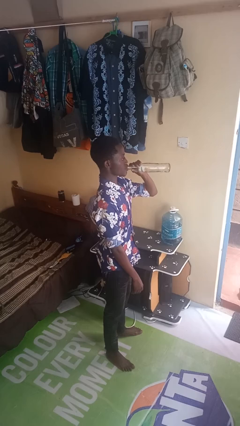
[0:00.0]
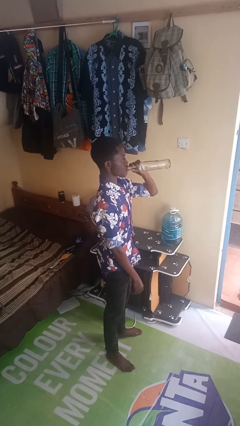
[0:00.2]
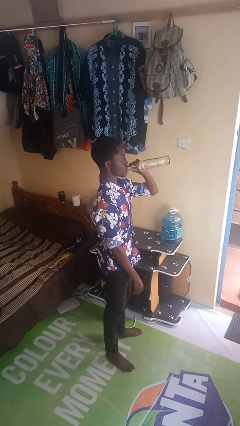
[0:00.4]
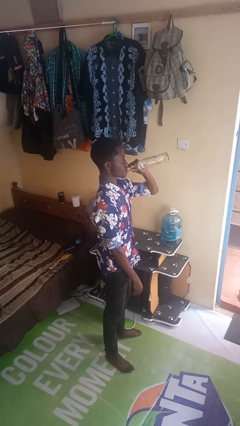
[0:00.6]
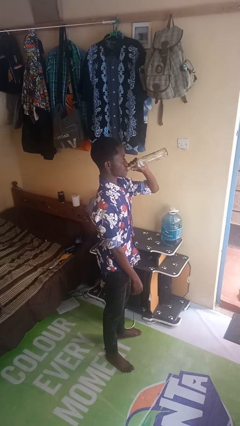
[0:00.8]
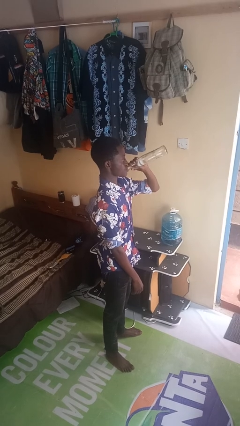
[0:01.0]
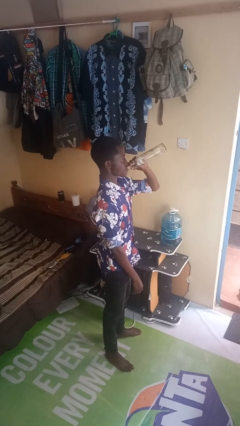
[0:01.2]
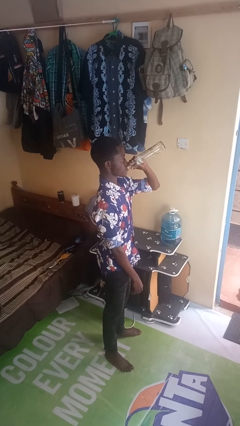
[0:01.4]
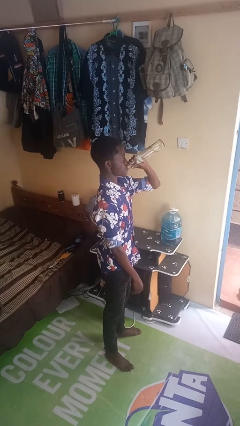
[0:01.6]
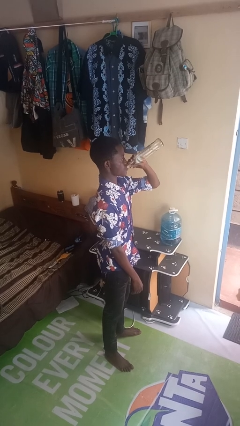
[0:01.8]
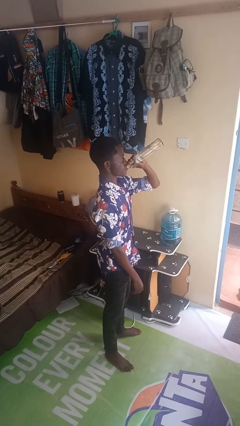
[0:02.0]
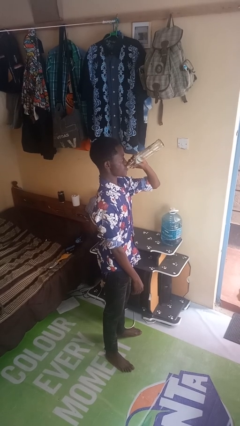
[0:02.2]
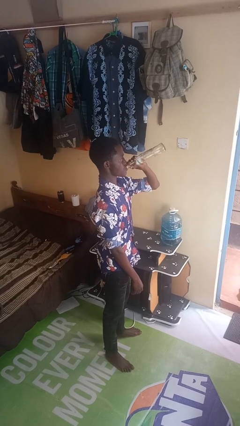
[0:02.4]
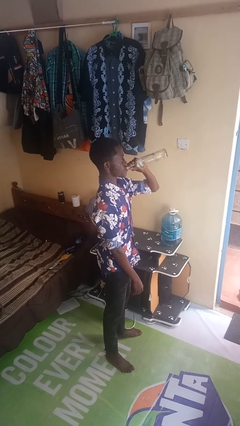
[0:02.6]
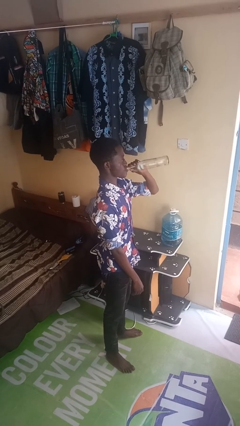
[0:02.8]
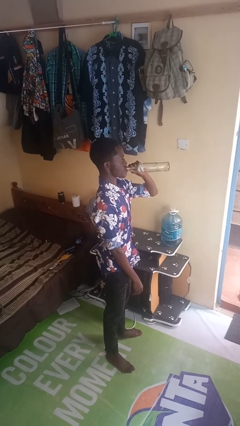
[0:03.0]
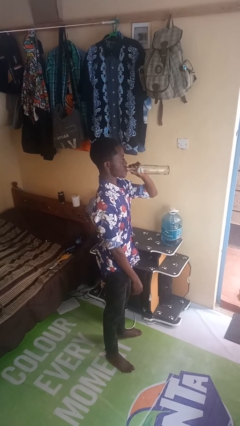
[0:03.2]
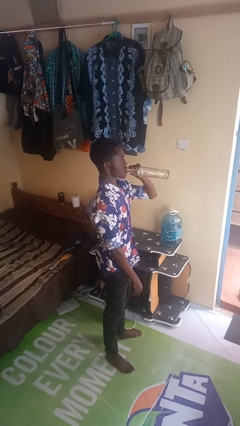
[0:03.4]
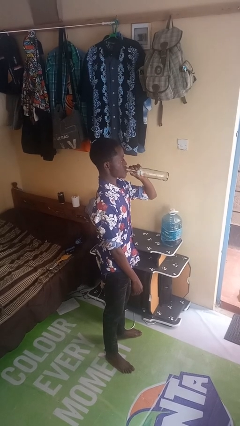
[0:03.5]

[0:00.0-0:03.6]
person drinks from bottle

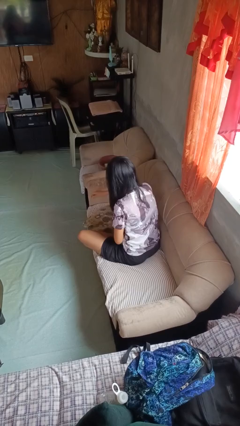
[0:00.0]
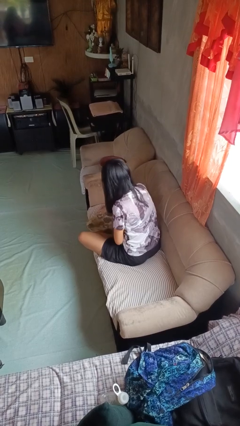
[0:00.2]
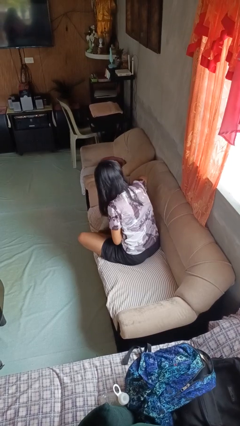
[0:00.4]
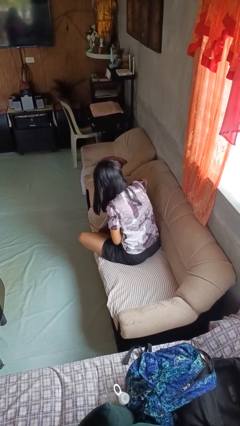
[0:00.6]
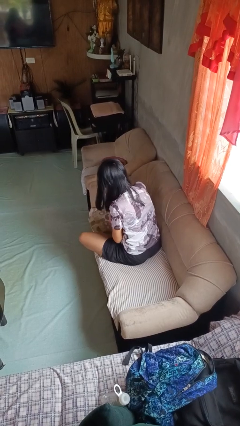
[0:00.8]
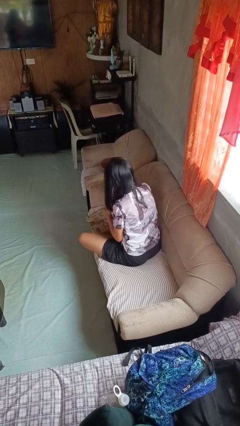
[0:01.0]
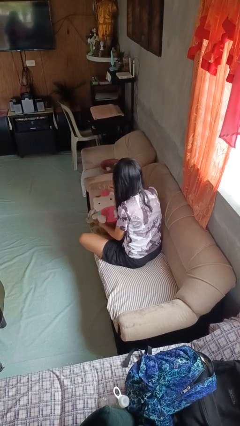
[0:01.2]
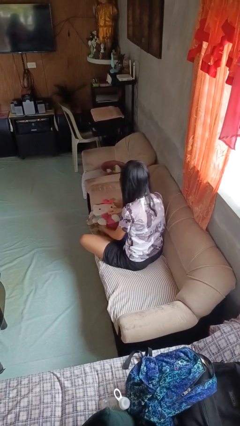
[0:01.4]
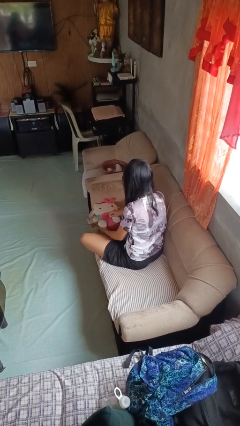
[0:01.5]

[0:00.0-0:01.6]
person searches in couch

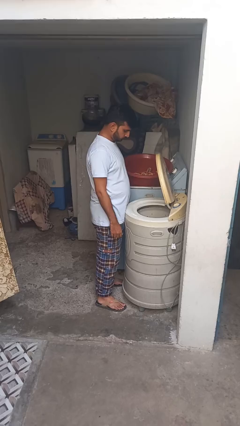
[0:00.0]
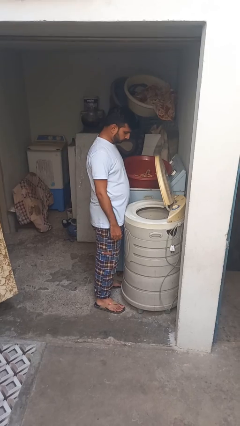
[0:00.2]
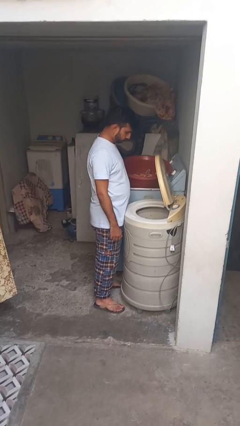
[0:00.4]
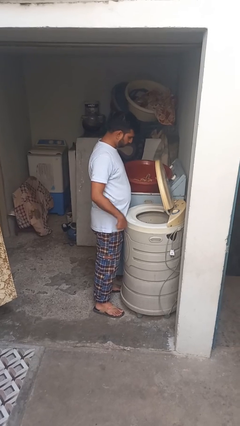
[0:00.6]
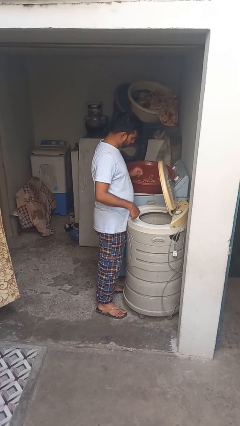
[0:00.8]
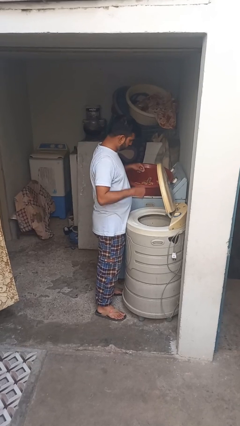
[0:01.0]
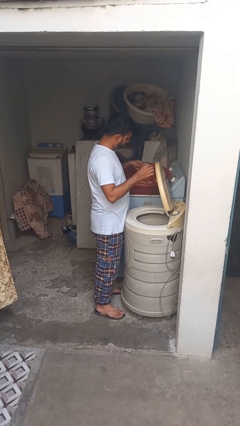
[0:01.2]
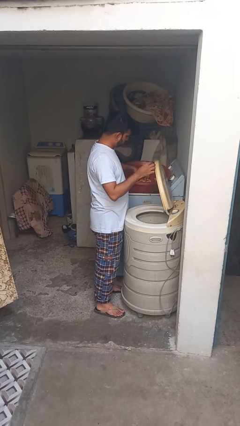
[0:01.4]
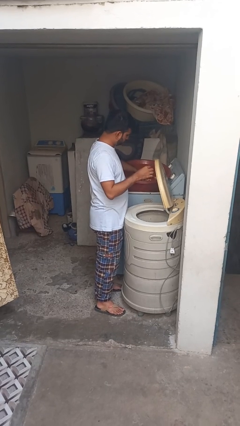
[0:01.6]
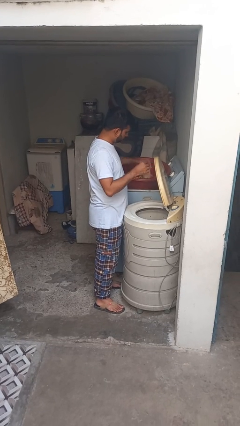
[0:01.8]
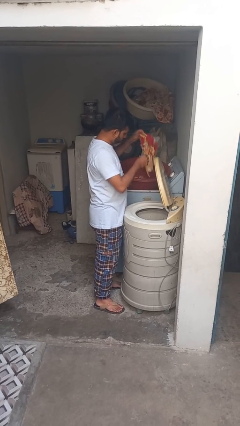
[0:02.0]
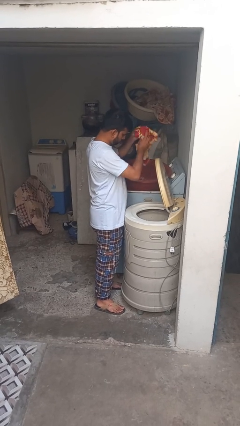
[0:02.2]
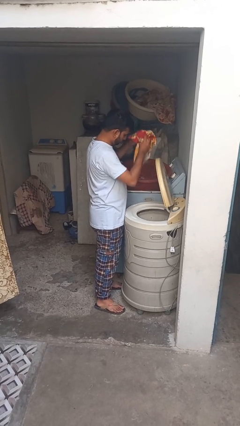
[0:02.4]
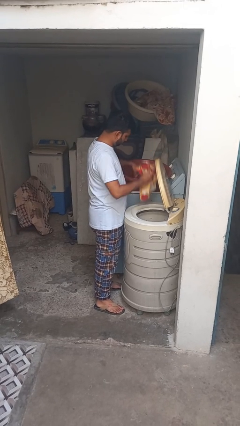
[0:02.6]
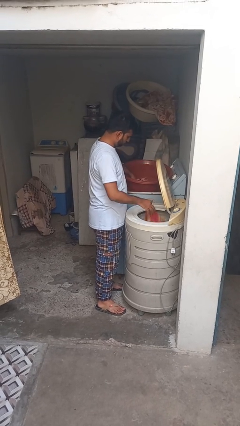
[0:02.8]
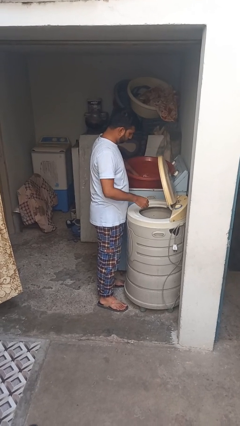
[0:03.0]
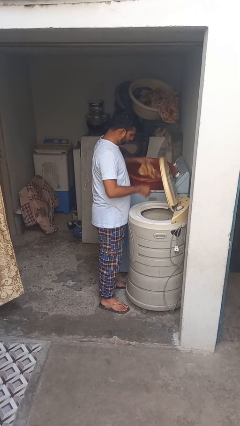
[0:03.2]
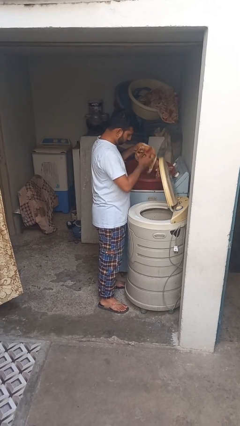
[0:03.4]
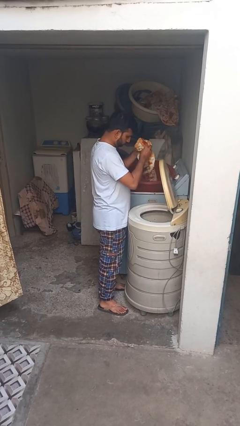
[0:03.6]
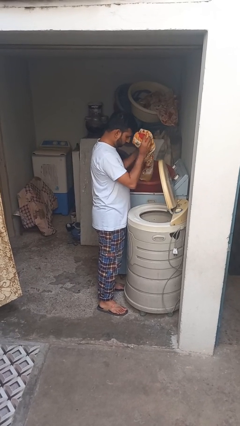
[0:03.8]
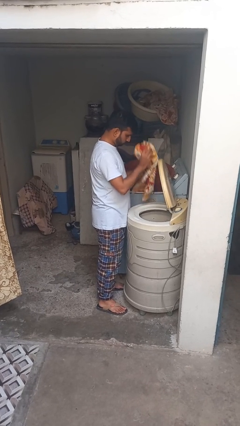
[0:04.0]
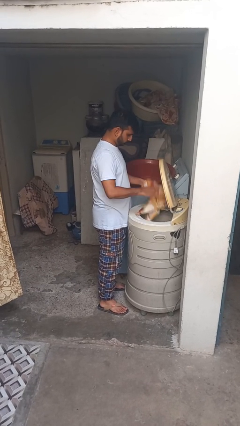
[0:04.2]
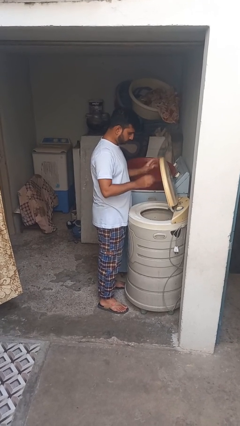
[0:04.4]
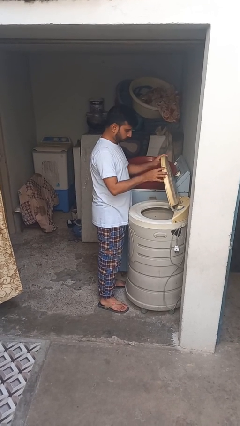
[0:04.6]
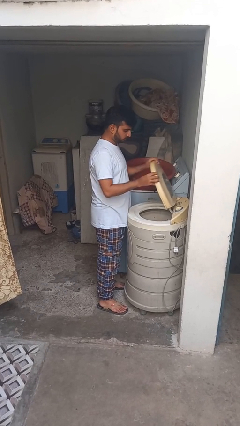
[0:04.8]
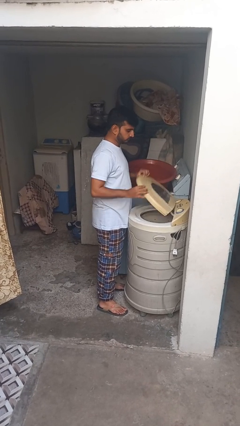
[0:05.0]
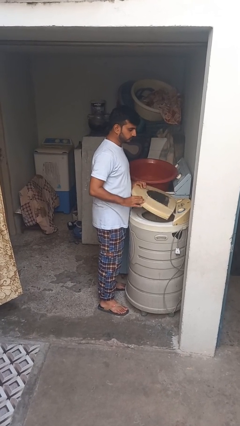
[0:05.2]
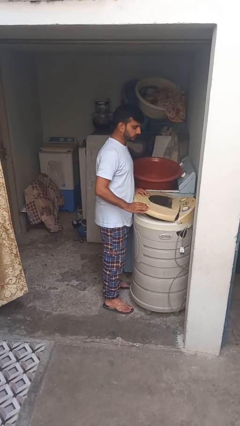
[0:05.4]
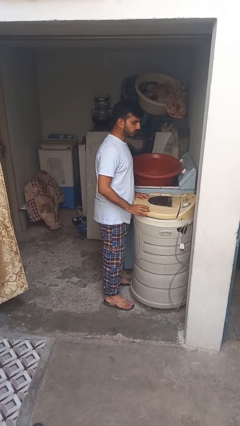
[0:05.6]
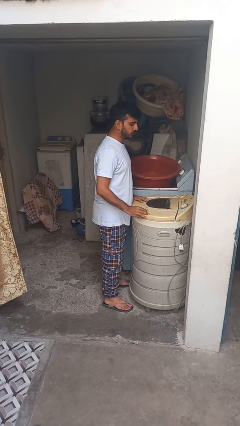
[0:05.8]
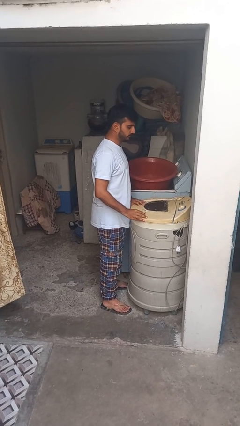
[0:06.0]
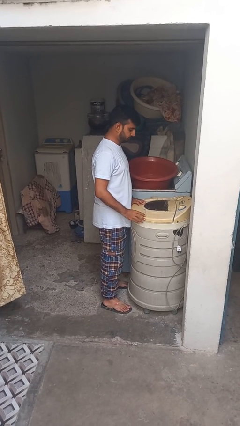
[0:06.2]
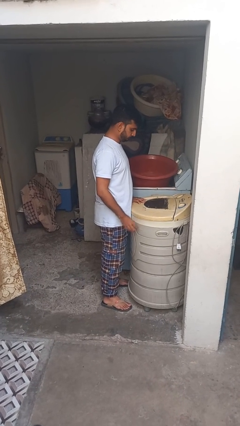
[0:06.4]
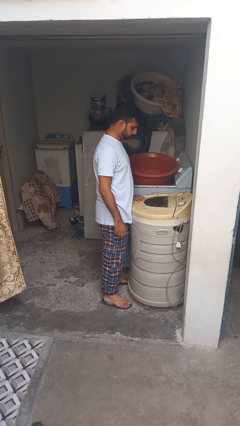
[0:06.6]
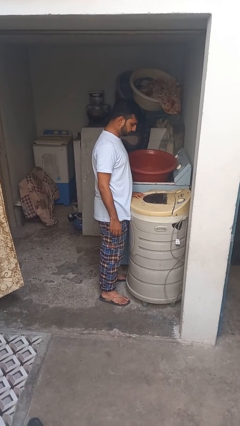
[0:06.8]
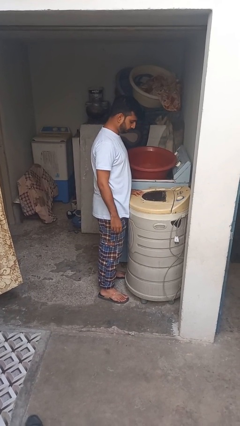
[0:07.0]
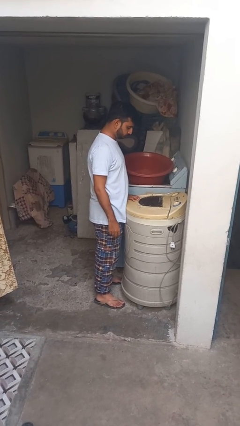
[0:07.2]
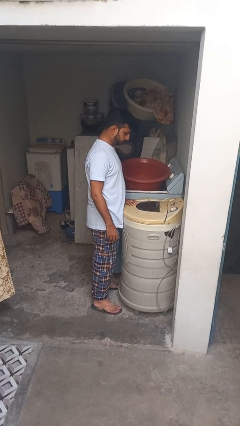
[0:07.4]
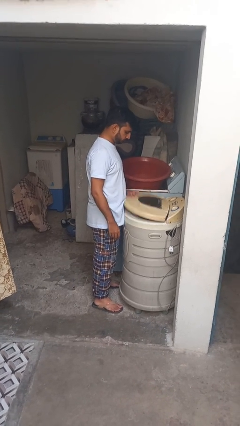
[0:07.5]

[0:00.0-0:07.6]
person loads clotheswasher

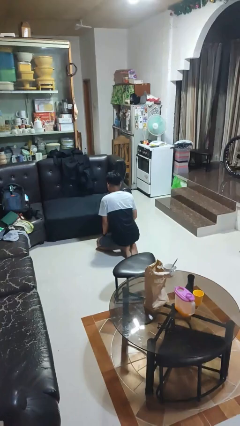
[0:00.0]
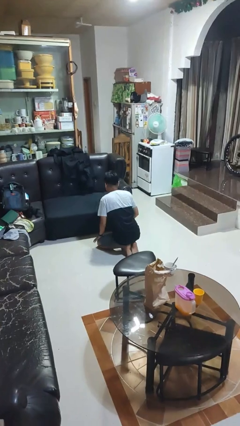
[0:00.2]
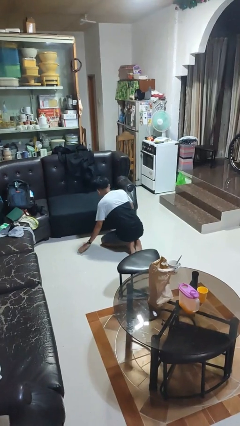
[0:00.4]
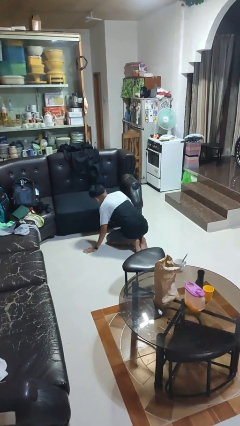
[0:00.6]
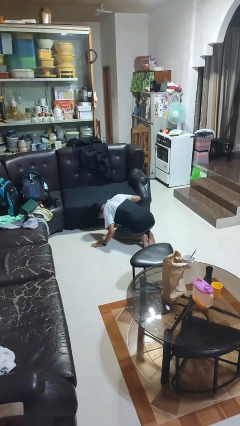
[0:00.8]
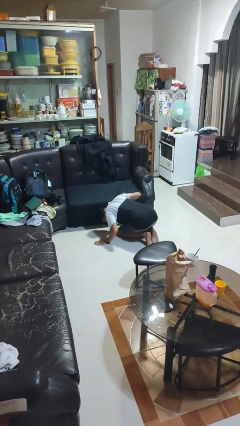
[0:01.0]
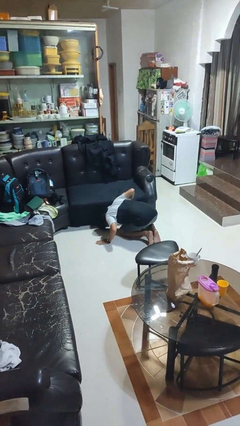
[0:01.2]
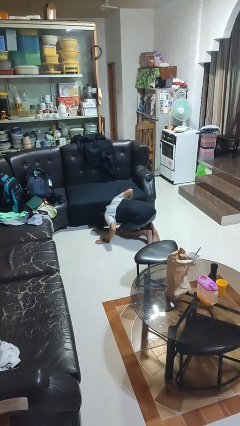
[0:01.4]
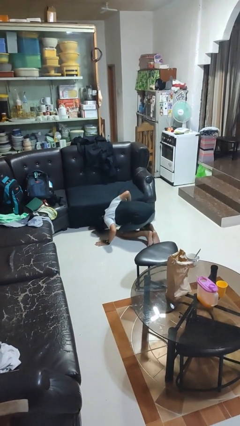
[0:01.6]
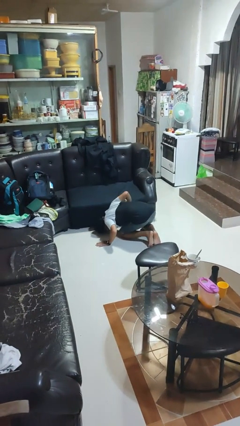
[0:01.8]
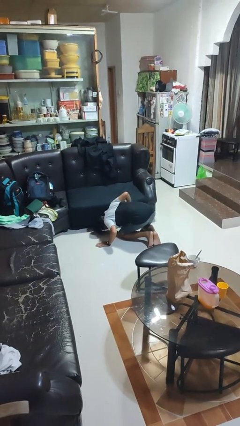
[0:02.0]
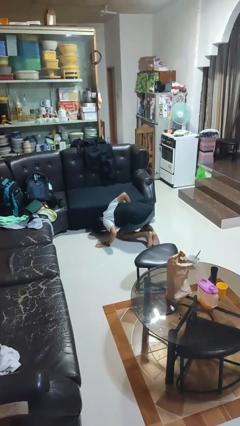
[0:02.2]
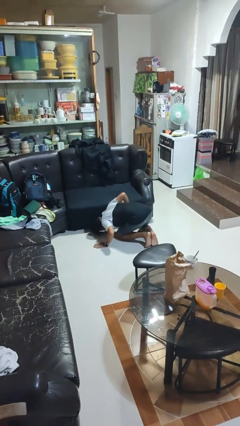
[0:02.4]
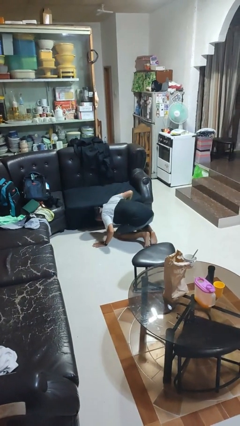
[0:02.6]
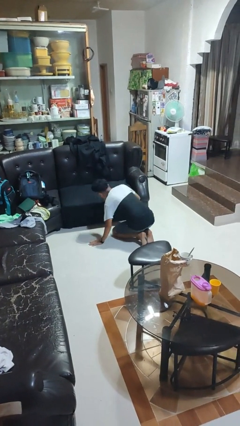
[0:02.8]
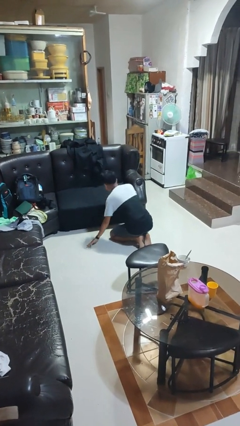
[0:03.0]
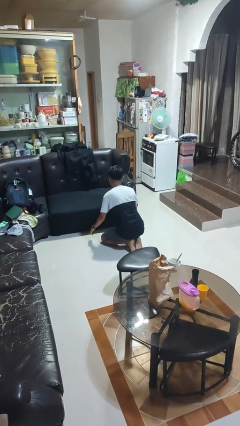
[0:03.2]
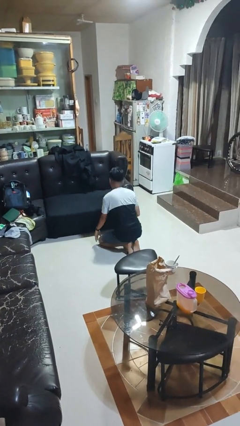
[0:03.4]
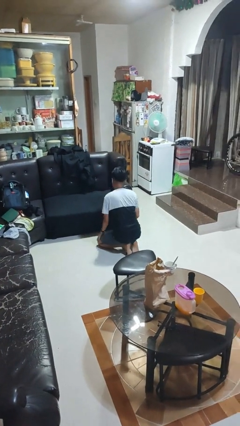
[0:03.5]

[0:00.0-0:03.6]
person searches under couch

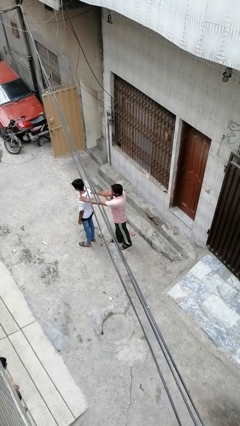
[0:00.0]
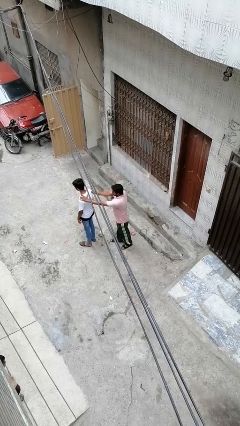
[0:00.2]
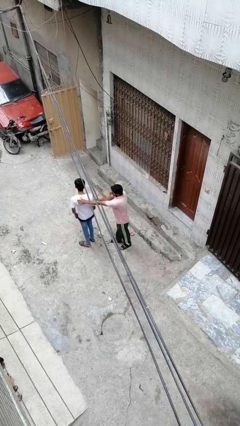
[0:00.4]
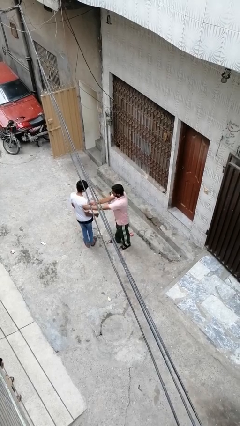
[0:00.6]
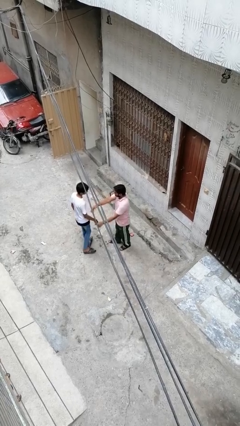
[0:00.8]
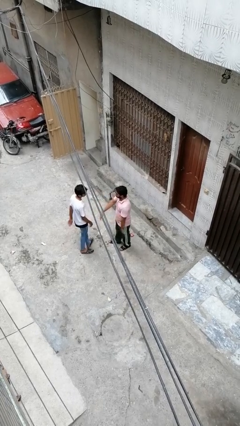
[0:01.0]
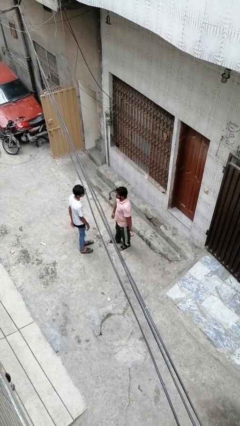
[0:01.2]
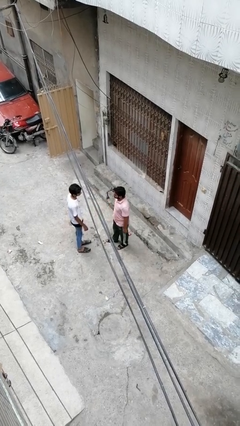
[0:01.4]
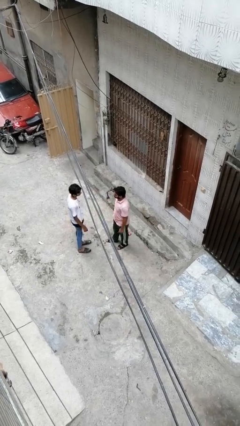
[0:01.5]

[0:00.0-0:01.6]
person spins person around
